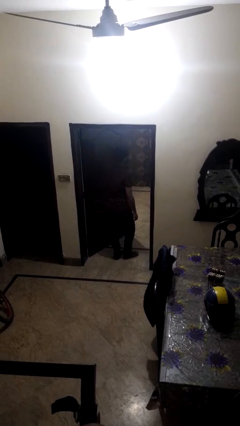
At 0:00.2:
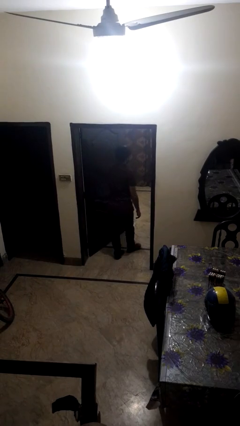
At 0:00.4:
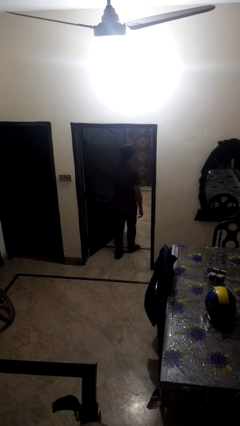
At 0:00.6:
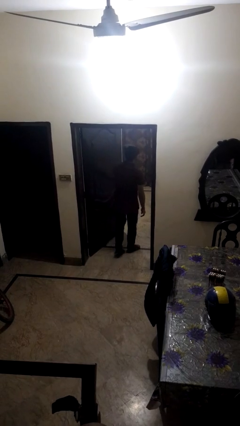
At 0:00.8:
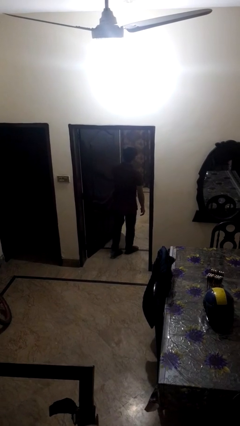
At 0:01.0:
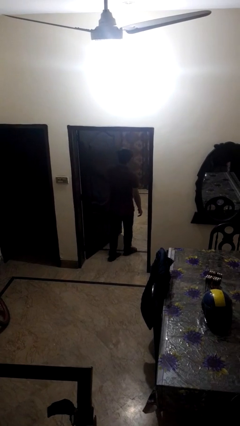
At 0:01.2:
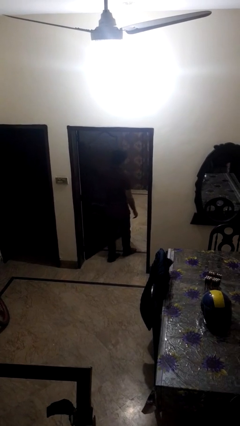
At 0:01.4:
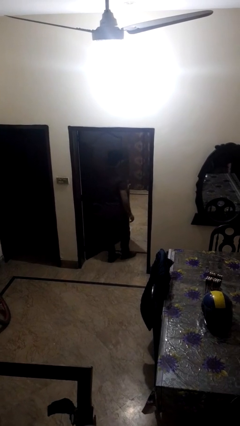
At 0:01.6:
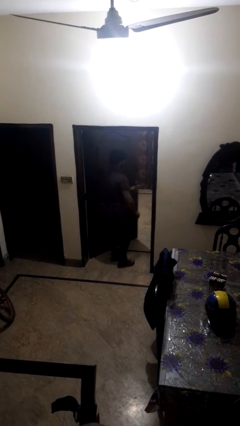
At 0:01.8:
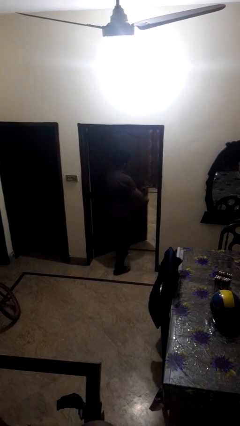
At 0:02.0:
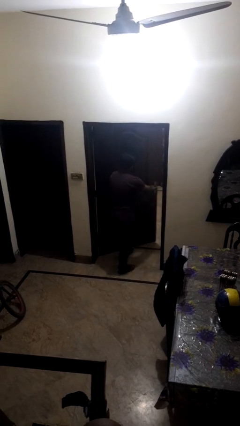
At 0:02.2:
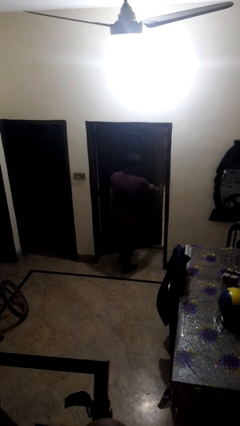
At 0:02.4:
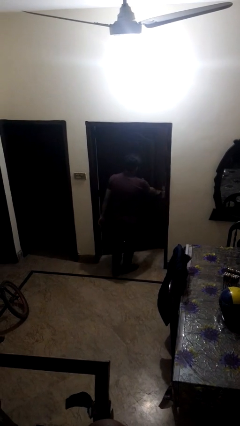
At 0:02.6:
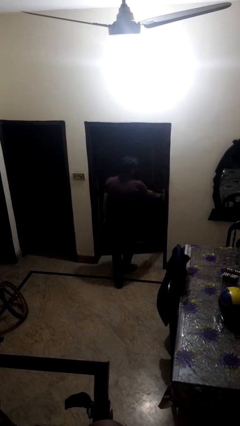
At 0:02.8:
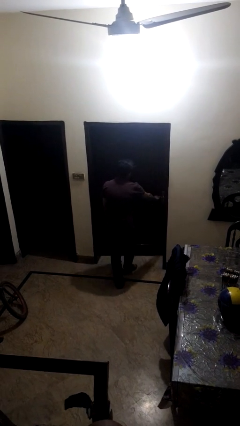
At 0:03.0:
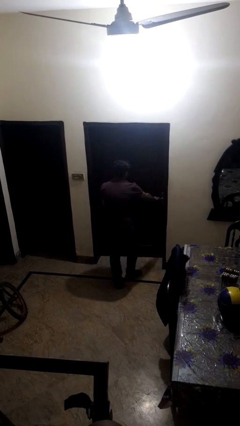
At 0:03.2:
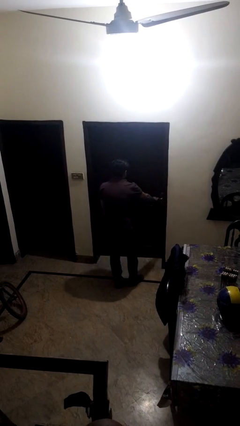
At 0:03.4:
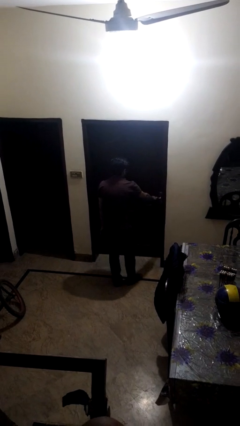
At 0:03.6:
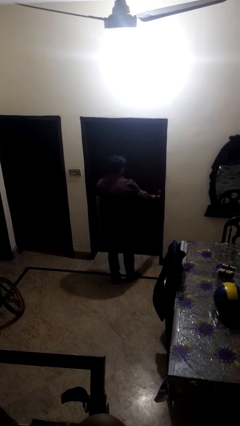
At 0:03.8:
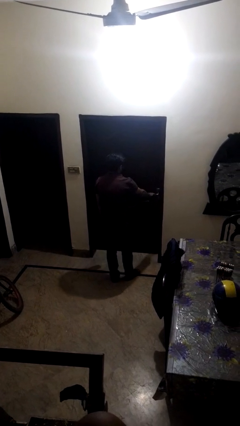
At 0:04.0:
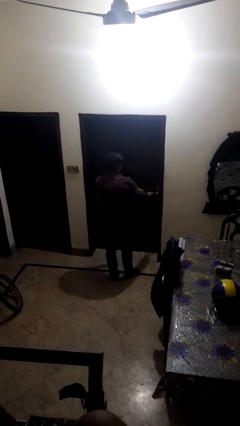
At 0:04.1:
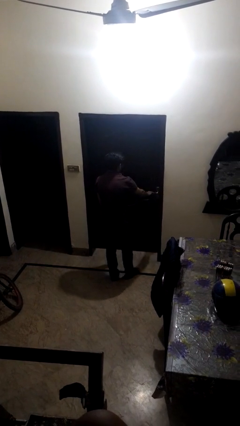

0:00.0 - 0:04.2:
person closes facility door

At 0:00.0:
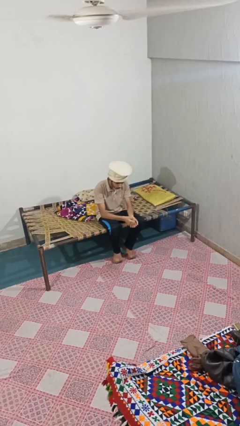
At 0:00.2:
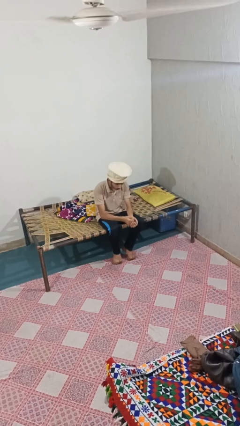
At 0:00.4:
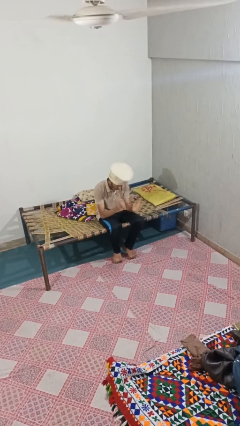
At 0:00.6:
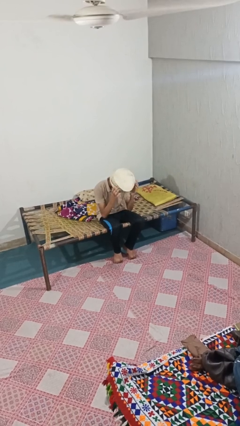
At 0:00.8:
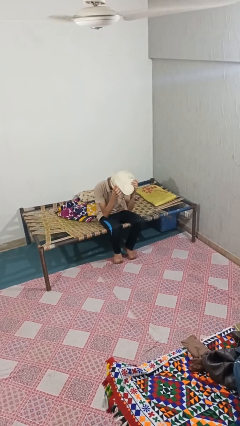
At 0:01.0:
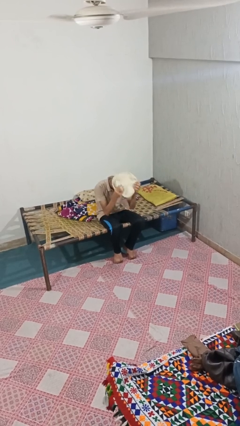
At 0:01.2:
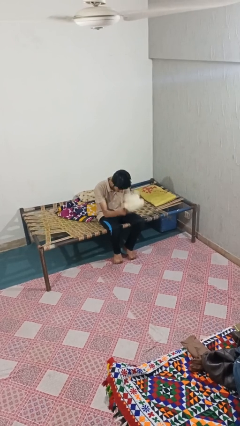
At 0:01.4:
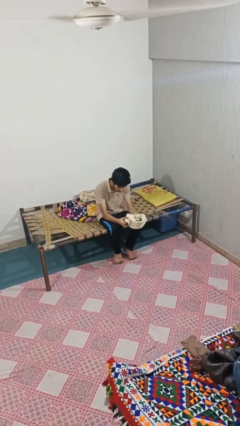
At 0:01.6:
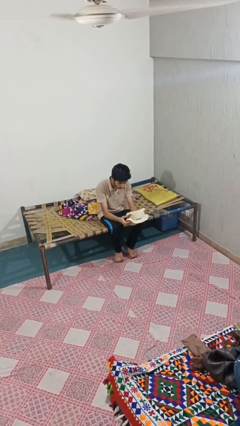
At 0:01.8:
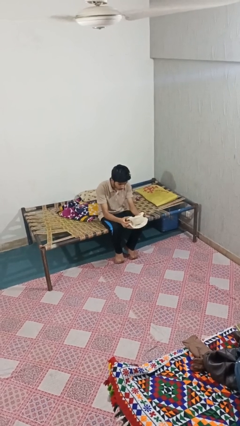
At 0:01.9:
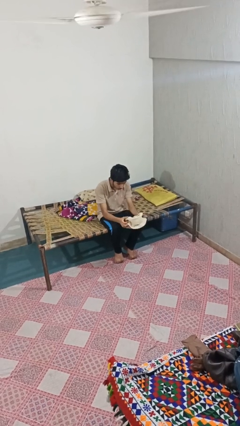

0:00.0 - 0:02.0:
person takes off hat

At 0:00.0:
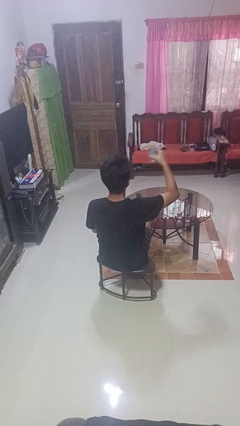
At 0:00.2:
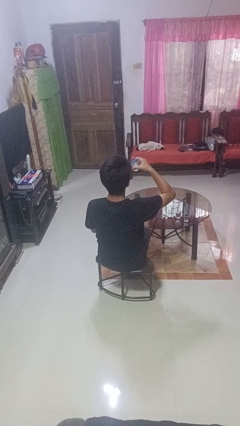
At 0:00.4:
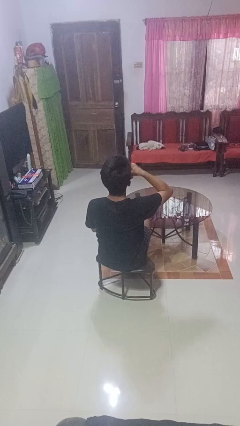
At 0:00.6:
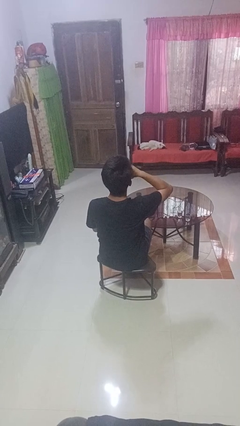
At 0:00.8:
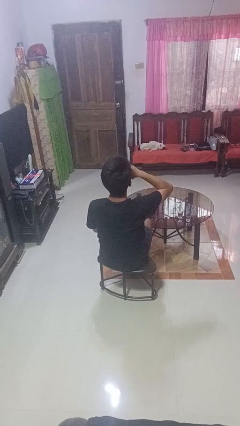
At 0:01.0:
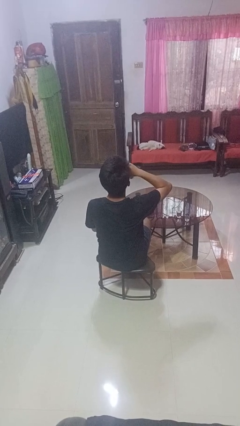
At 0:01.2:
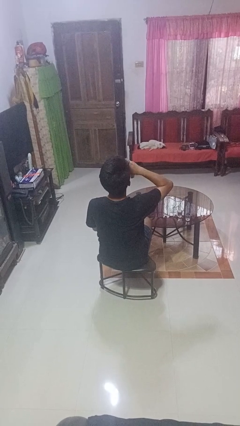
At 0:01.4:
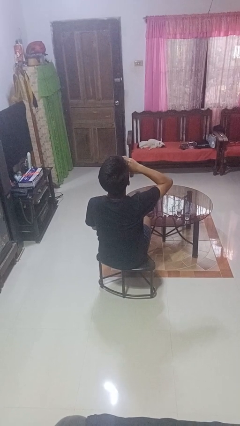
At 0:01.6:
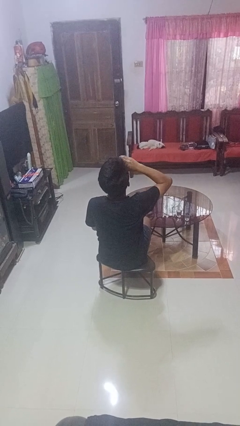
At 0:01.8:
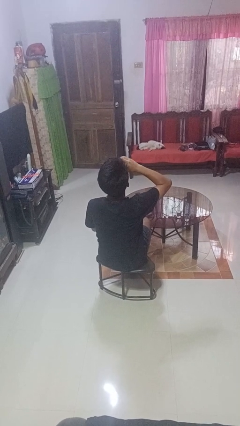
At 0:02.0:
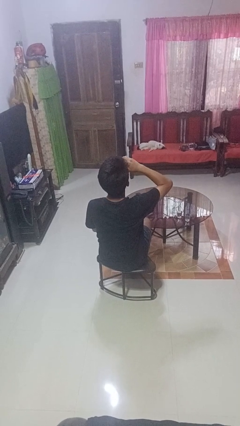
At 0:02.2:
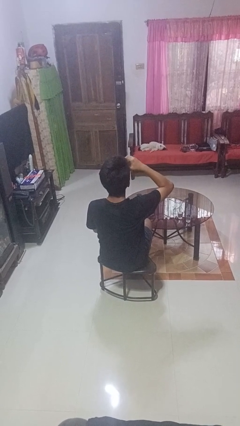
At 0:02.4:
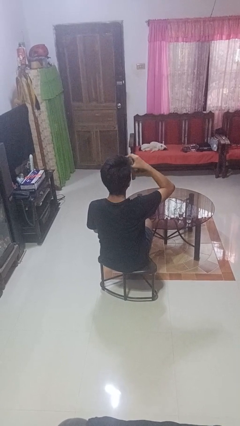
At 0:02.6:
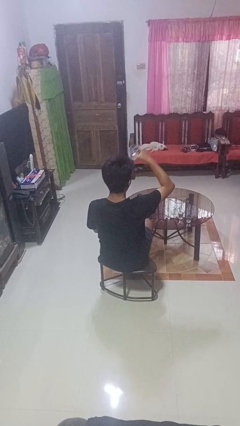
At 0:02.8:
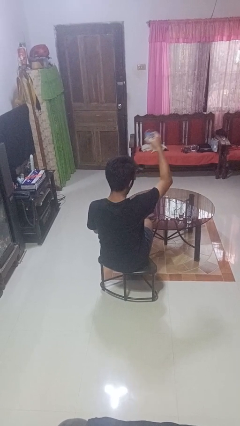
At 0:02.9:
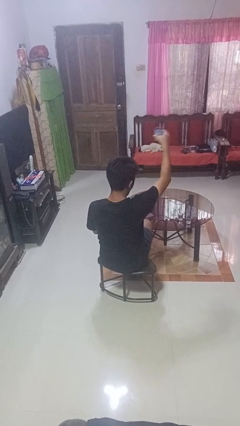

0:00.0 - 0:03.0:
person drinks from shotglass

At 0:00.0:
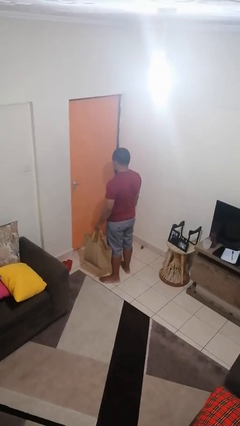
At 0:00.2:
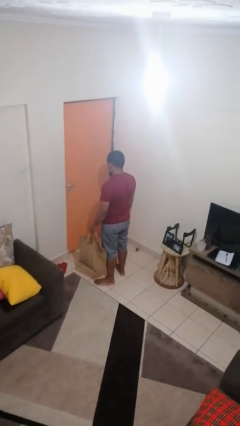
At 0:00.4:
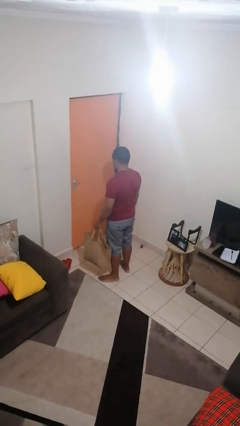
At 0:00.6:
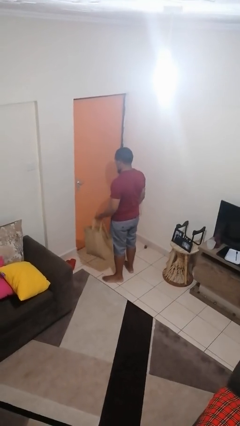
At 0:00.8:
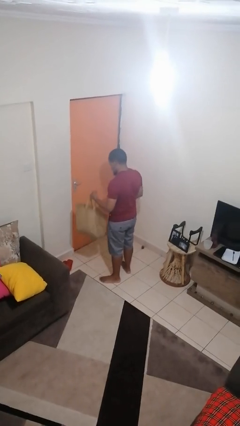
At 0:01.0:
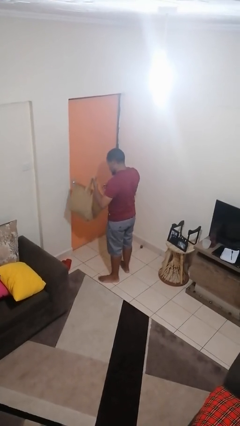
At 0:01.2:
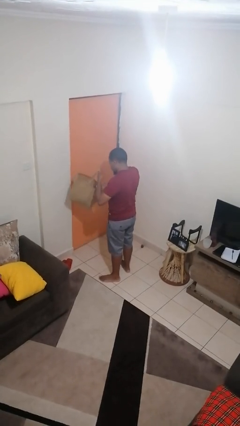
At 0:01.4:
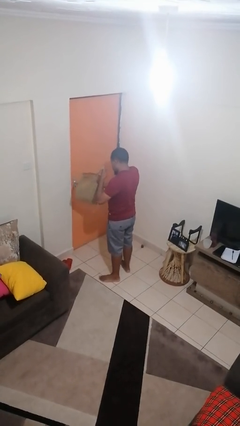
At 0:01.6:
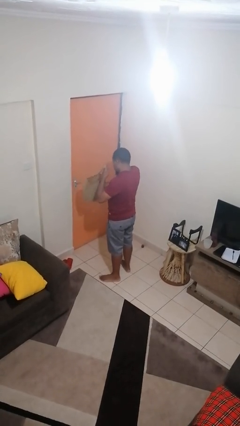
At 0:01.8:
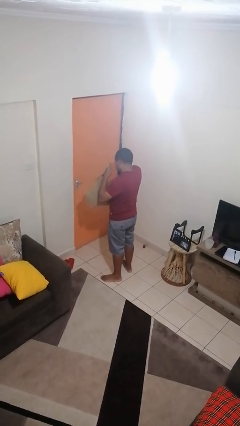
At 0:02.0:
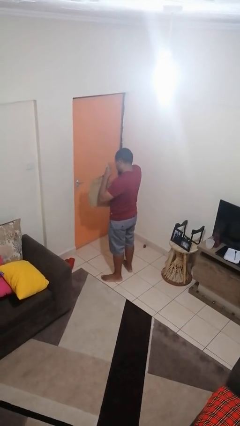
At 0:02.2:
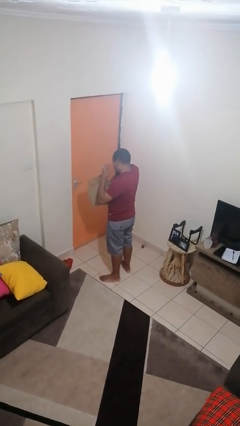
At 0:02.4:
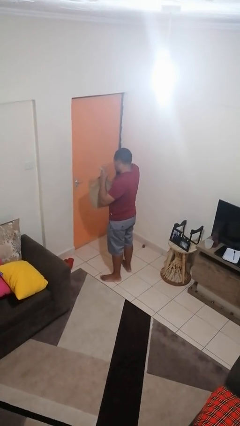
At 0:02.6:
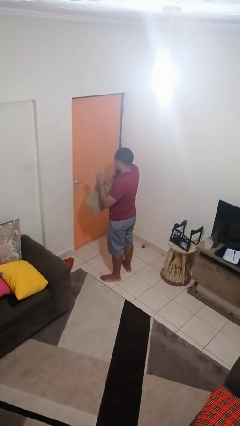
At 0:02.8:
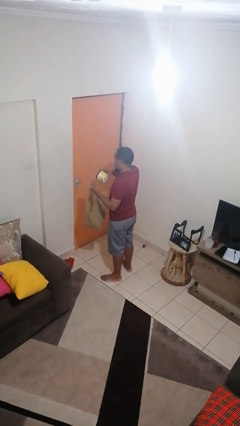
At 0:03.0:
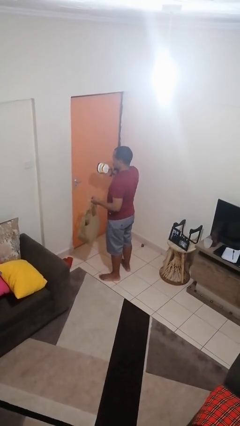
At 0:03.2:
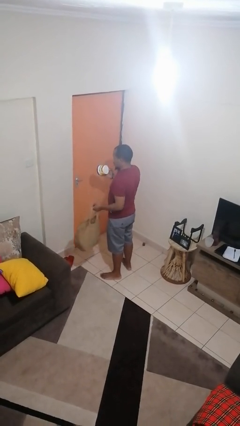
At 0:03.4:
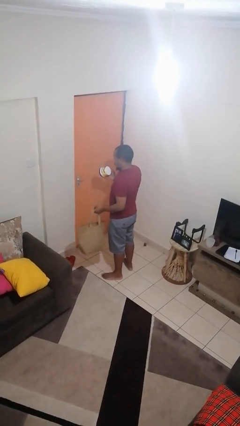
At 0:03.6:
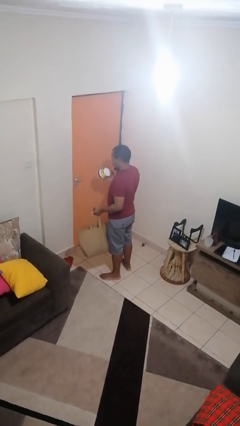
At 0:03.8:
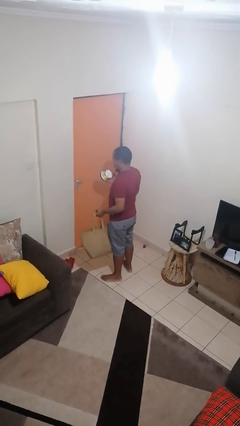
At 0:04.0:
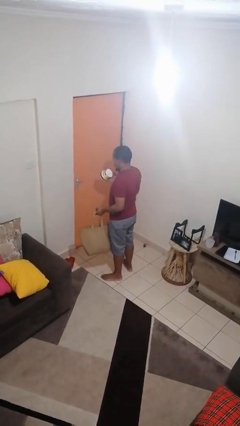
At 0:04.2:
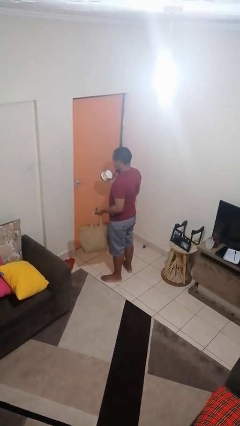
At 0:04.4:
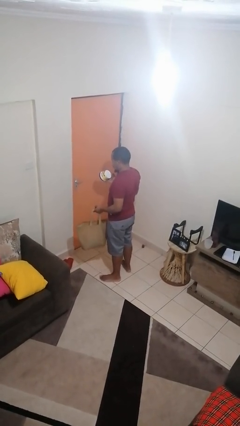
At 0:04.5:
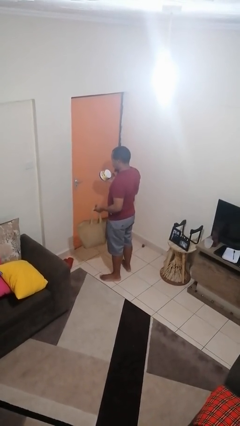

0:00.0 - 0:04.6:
person takes object from bag

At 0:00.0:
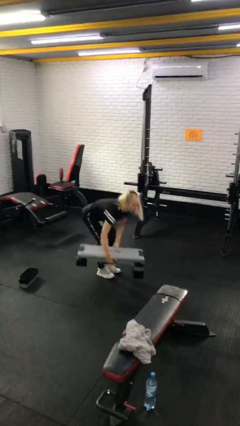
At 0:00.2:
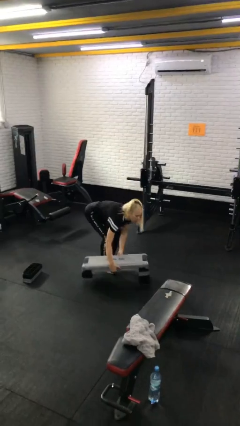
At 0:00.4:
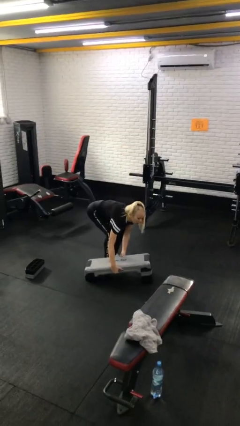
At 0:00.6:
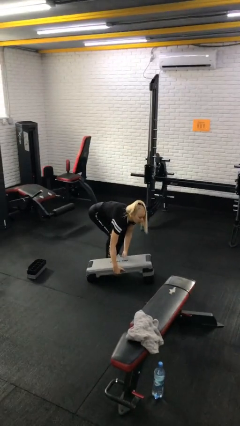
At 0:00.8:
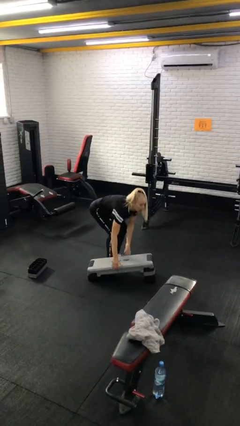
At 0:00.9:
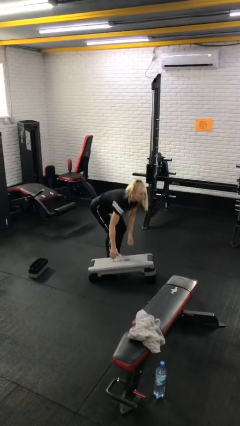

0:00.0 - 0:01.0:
person puts down object on floor

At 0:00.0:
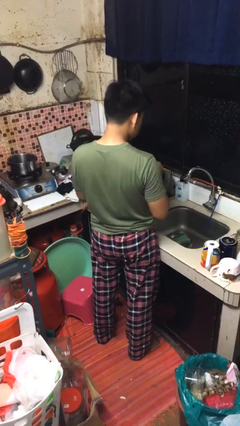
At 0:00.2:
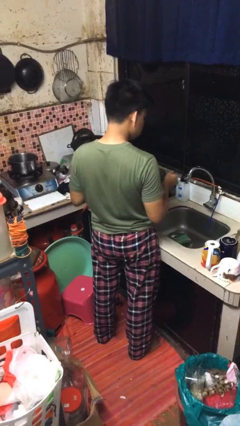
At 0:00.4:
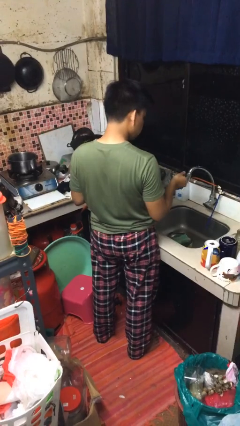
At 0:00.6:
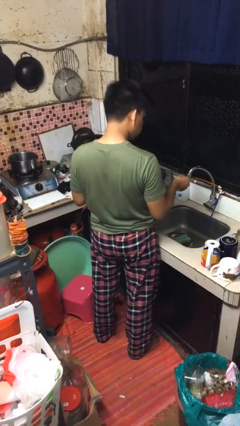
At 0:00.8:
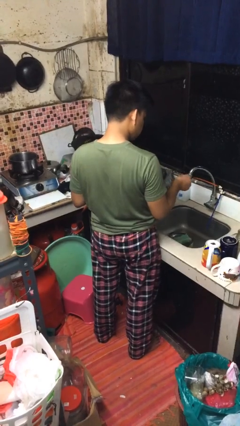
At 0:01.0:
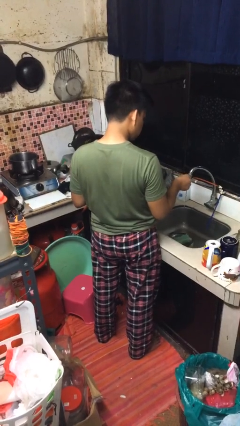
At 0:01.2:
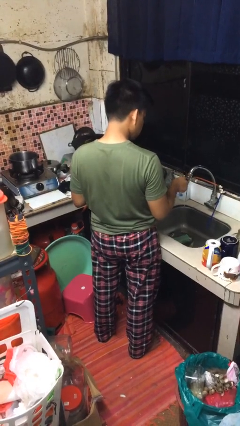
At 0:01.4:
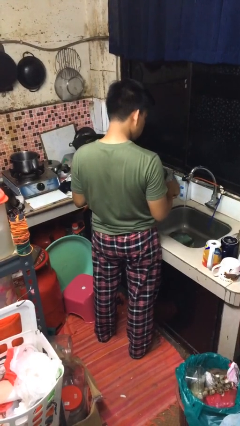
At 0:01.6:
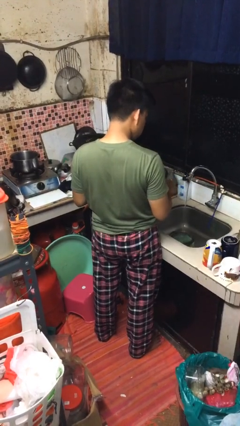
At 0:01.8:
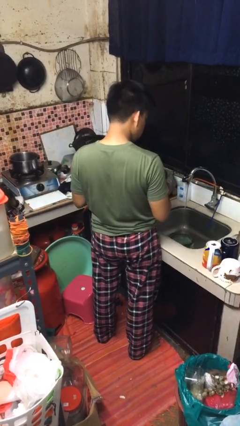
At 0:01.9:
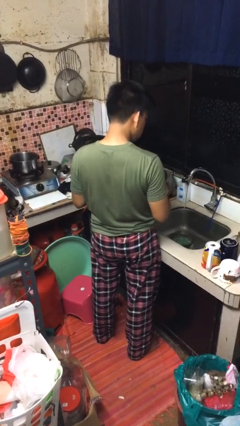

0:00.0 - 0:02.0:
person turns on faucet

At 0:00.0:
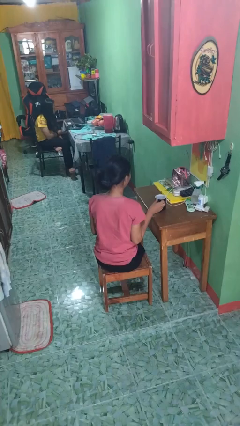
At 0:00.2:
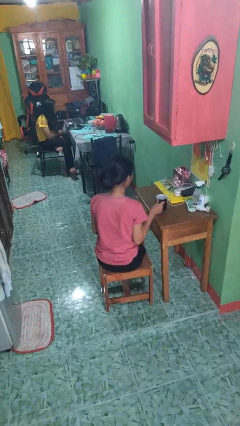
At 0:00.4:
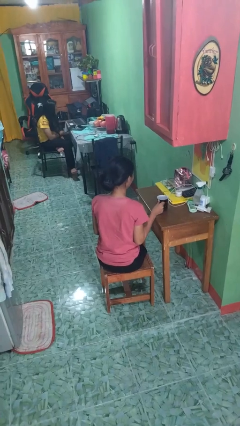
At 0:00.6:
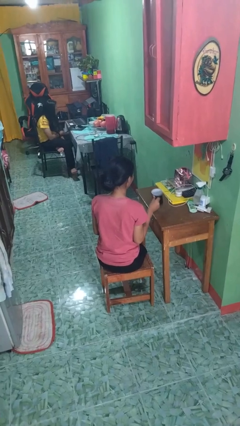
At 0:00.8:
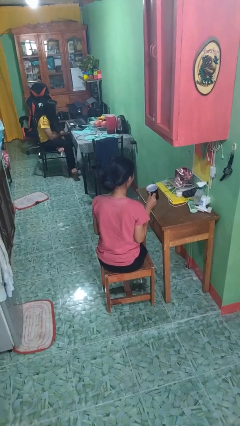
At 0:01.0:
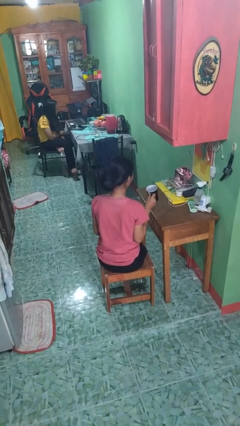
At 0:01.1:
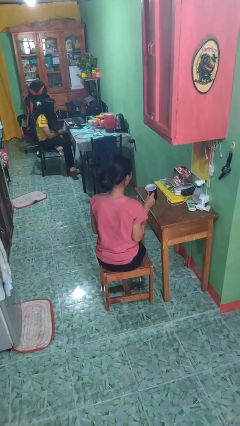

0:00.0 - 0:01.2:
person picks up object from table
